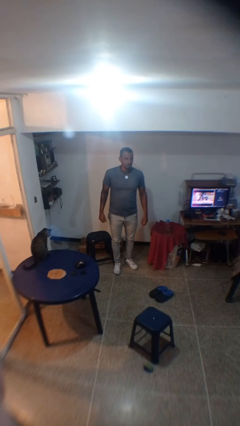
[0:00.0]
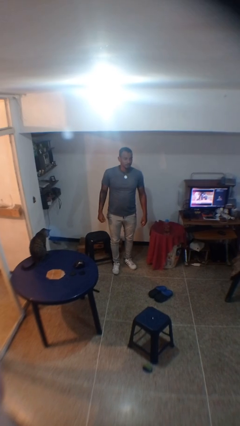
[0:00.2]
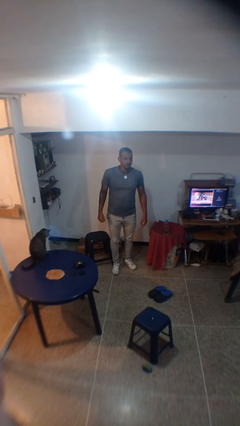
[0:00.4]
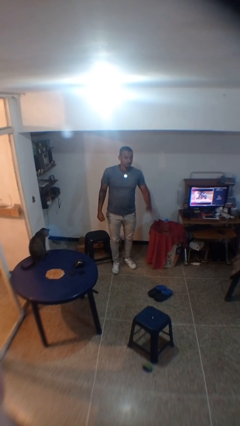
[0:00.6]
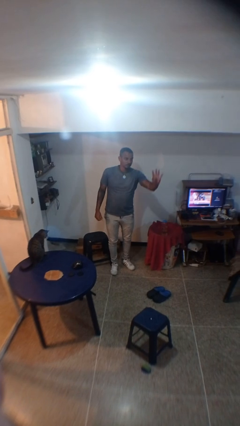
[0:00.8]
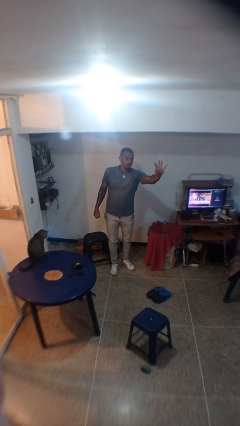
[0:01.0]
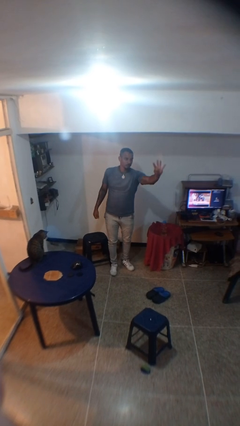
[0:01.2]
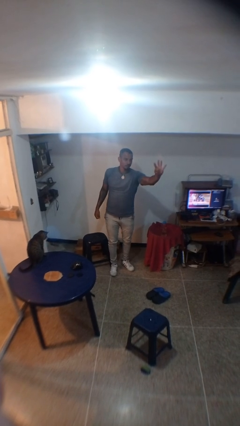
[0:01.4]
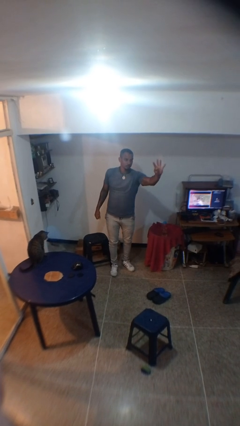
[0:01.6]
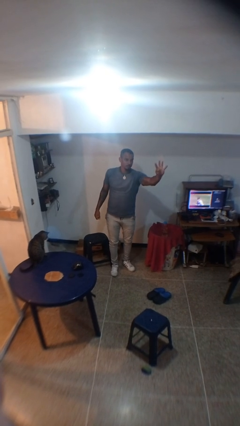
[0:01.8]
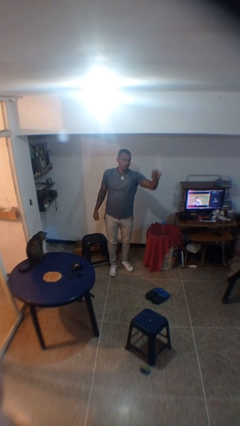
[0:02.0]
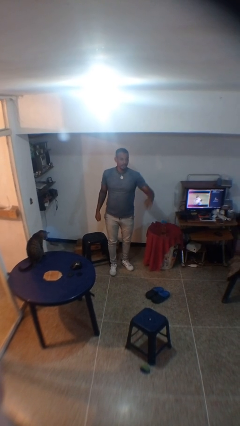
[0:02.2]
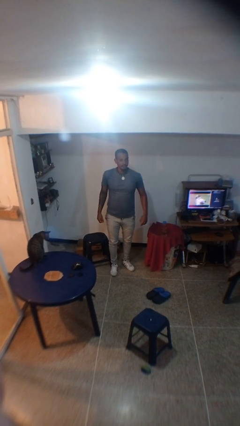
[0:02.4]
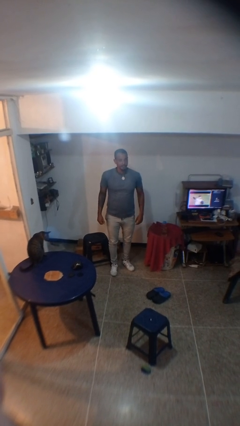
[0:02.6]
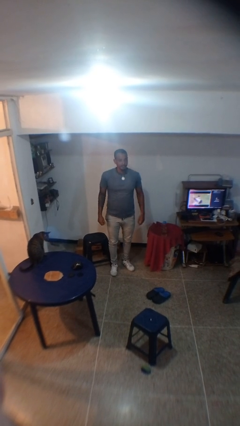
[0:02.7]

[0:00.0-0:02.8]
person gestures number four

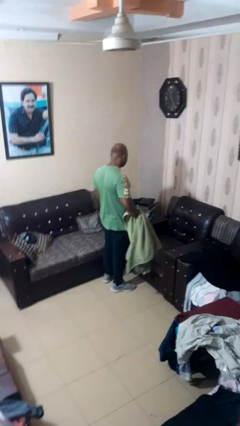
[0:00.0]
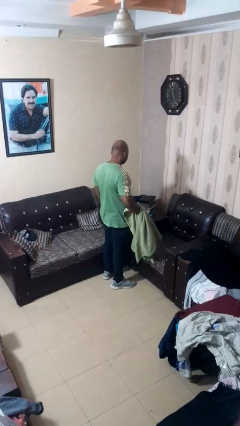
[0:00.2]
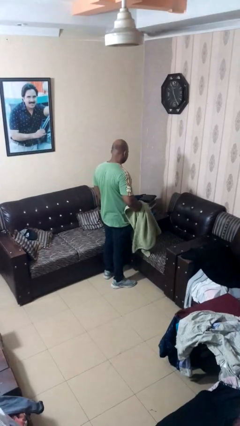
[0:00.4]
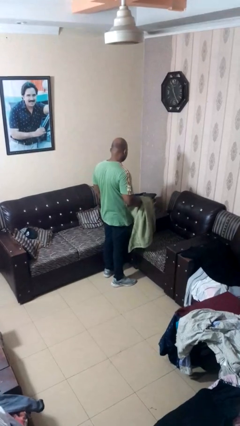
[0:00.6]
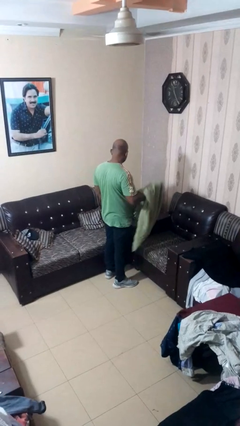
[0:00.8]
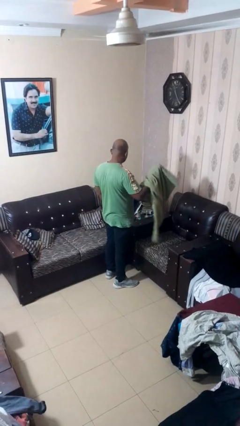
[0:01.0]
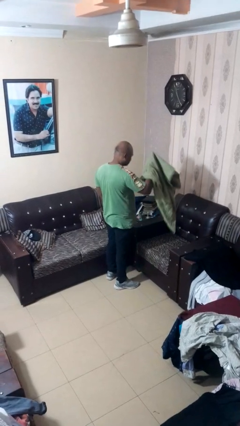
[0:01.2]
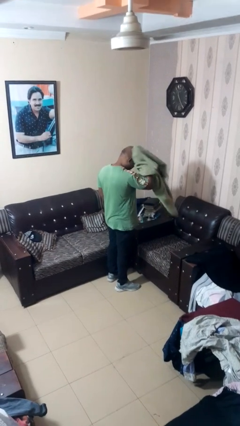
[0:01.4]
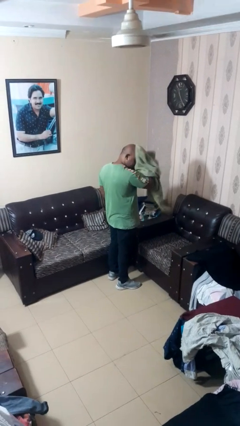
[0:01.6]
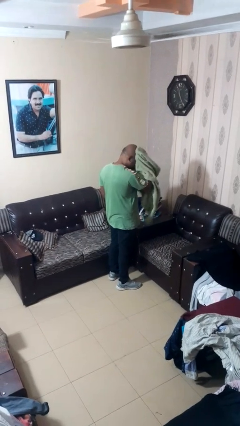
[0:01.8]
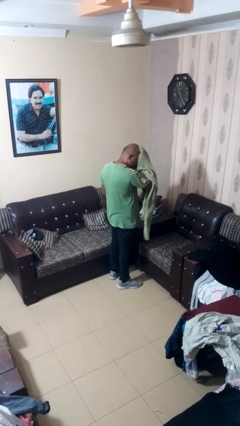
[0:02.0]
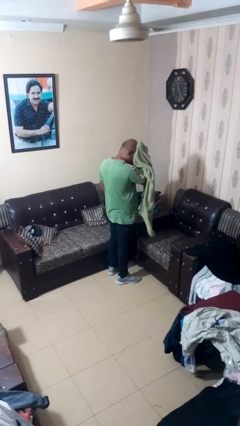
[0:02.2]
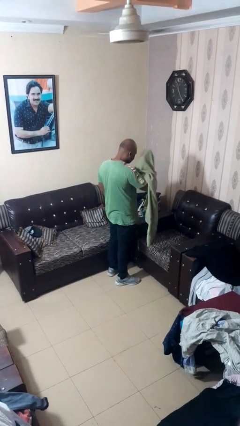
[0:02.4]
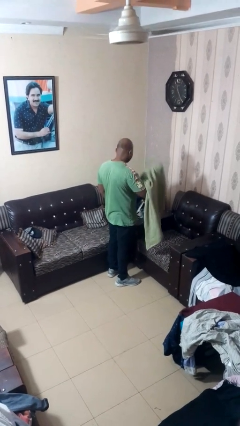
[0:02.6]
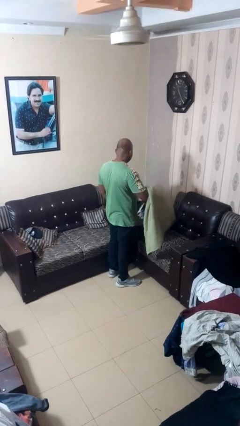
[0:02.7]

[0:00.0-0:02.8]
person dries hair with towel

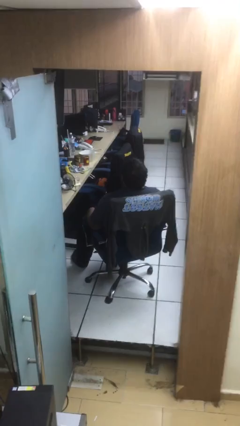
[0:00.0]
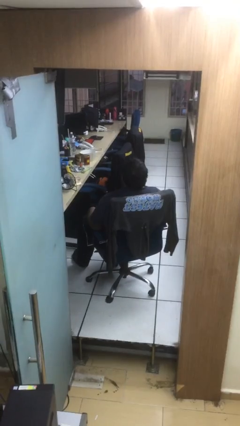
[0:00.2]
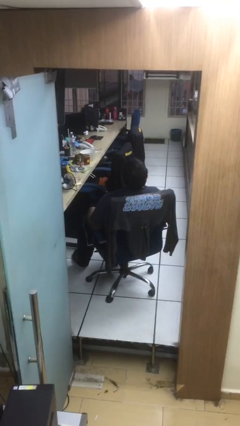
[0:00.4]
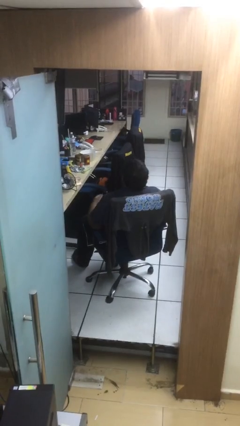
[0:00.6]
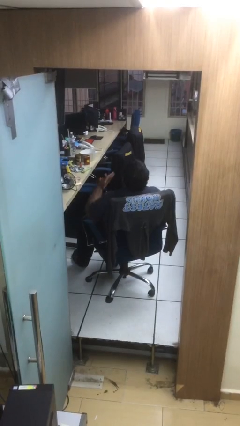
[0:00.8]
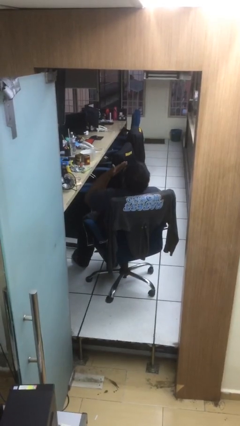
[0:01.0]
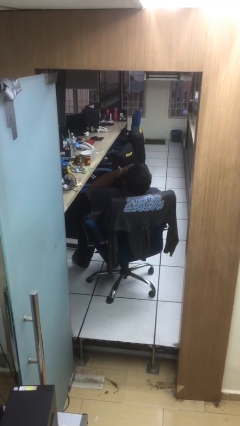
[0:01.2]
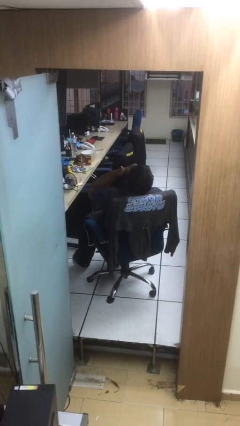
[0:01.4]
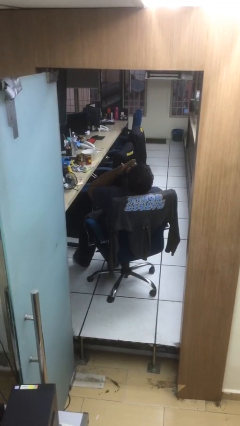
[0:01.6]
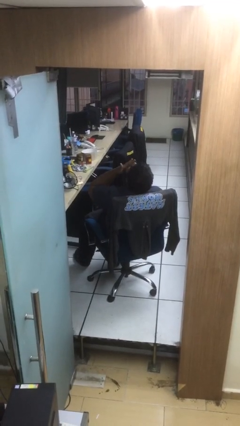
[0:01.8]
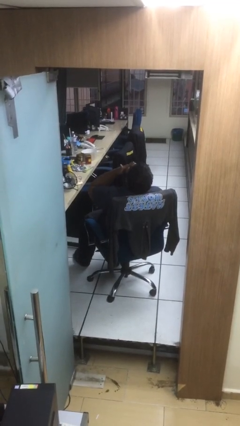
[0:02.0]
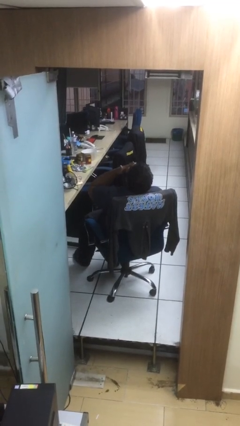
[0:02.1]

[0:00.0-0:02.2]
person yawns

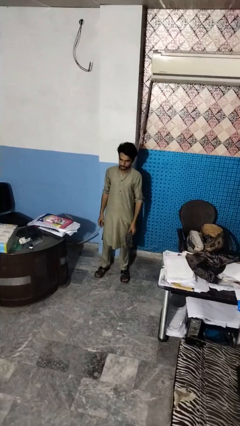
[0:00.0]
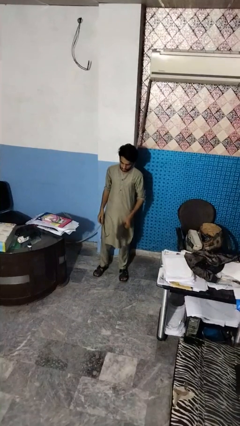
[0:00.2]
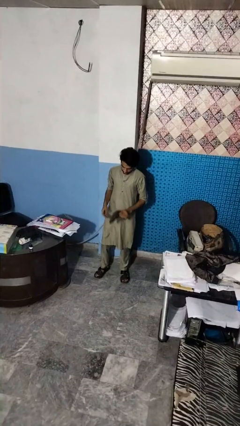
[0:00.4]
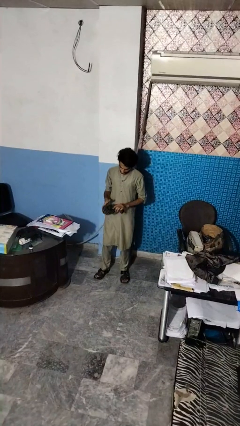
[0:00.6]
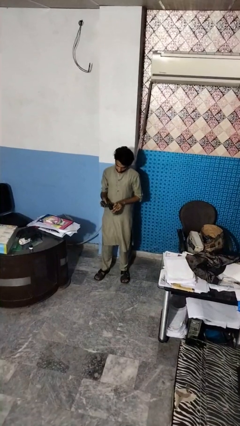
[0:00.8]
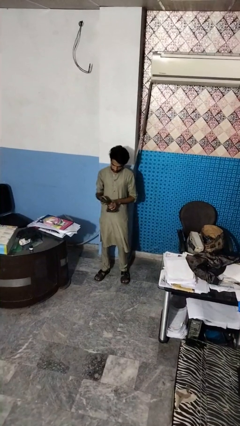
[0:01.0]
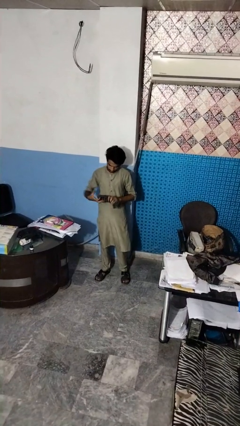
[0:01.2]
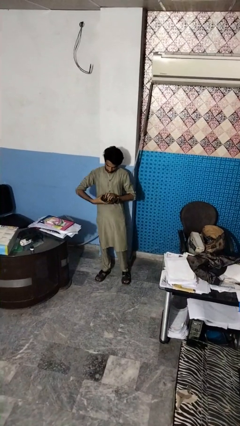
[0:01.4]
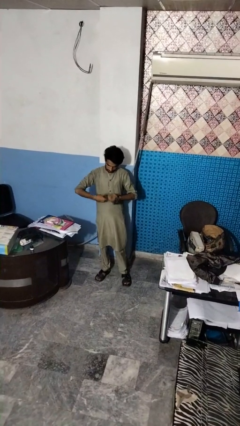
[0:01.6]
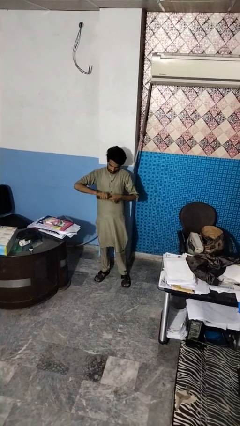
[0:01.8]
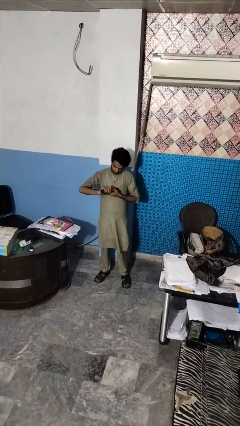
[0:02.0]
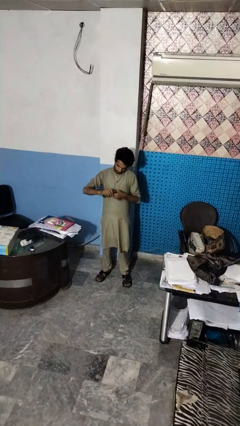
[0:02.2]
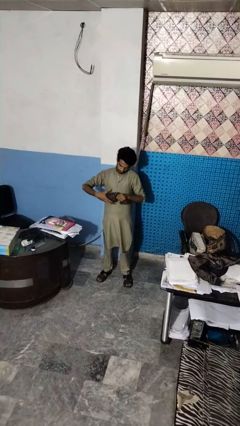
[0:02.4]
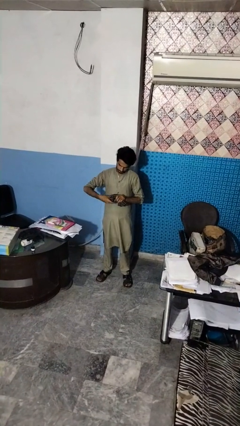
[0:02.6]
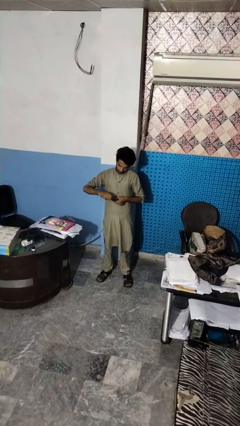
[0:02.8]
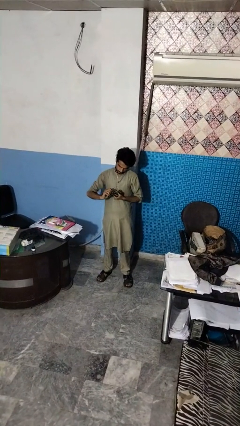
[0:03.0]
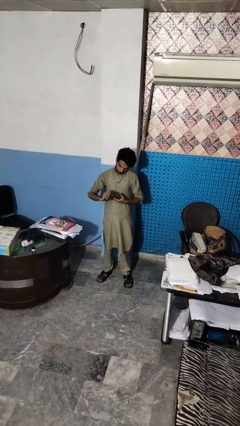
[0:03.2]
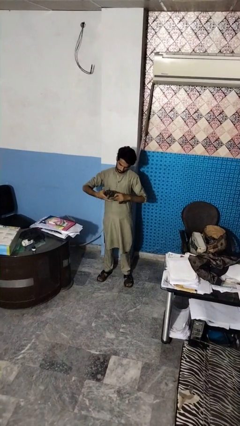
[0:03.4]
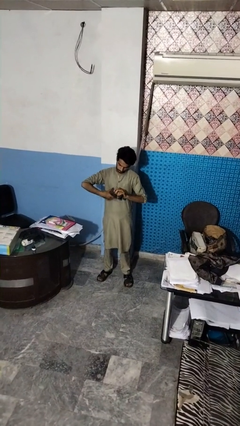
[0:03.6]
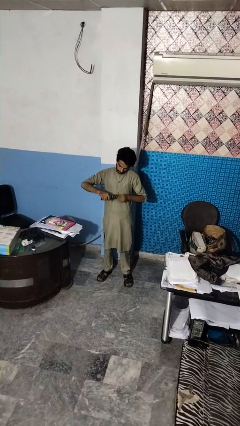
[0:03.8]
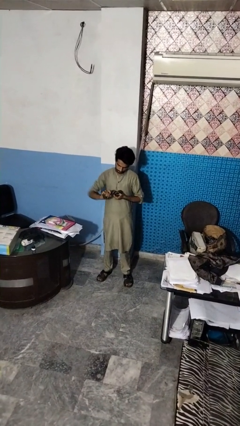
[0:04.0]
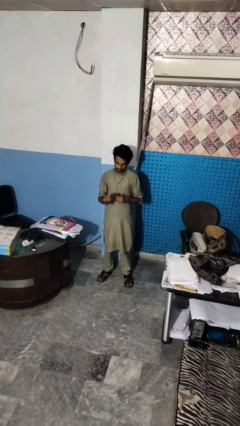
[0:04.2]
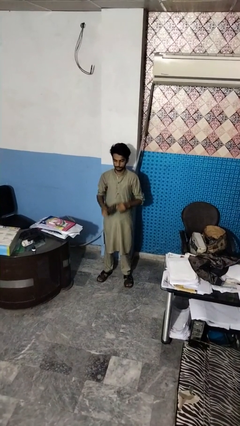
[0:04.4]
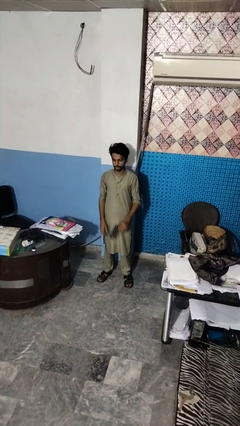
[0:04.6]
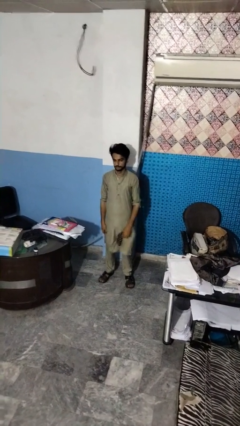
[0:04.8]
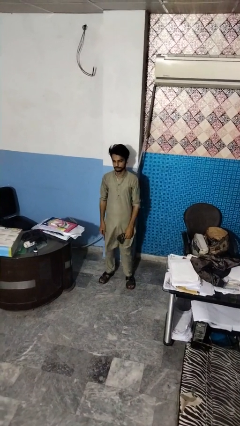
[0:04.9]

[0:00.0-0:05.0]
person squeezes object

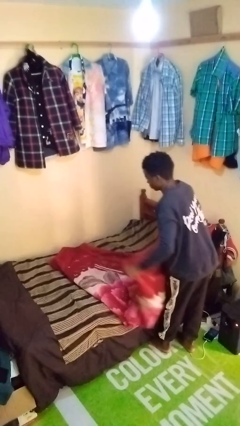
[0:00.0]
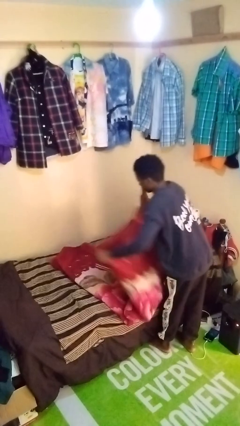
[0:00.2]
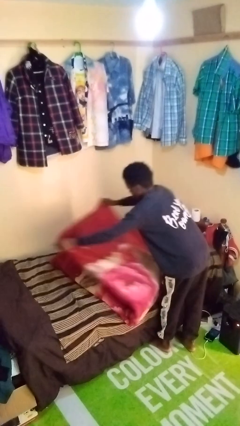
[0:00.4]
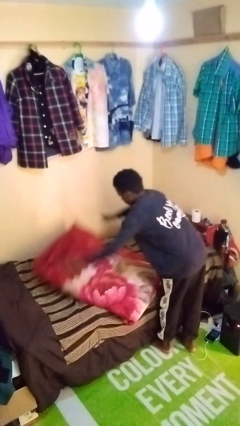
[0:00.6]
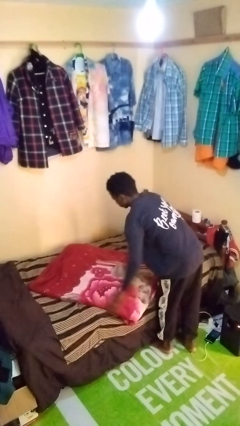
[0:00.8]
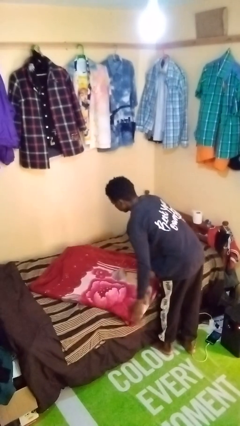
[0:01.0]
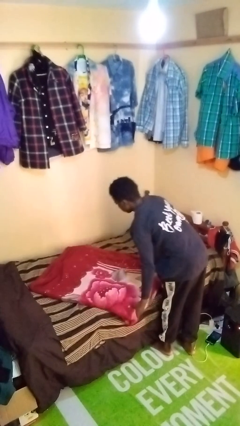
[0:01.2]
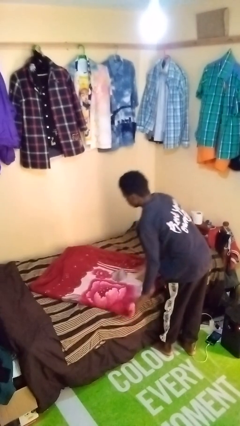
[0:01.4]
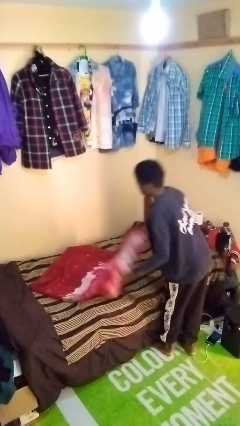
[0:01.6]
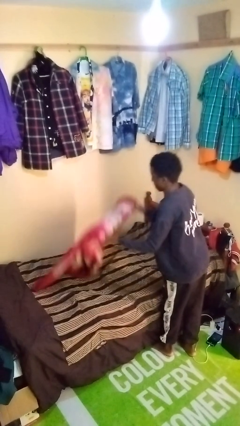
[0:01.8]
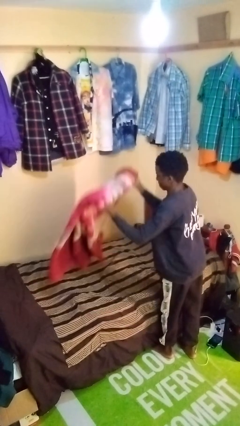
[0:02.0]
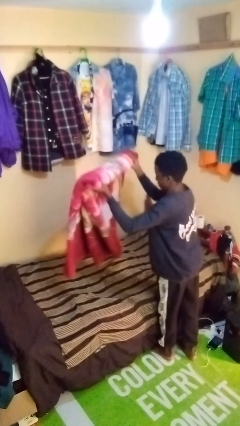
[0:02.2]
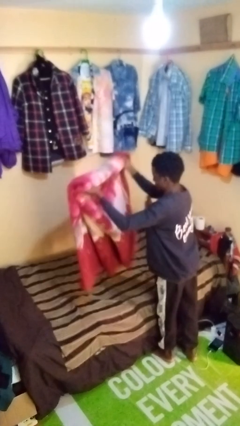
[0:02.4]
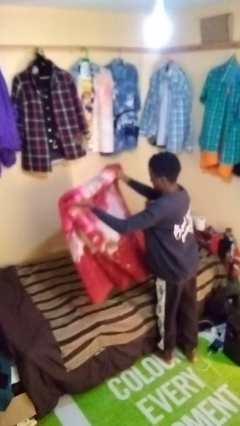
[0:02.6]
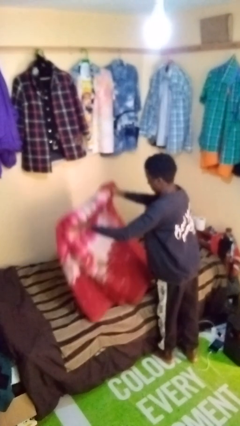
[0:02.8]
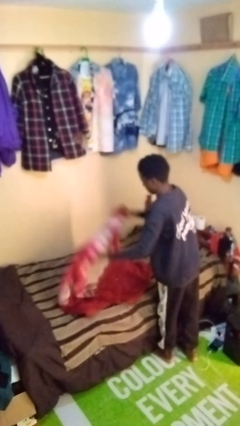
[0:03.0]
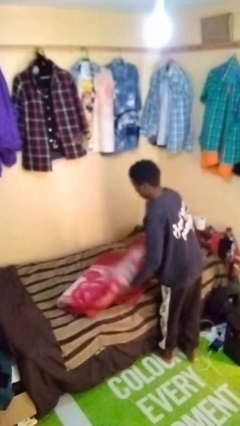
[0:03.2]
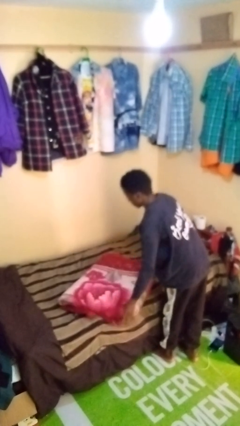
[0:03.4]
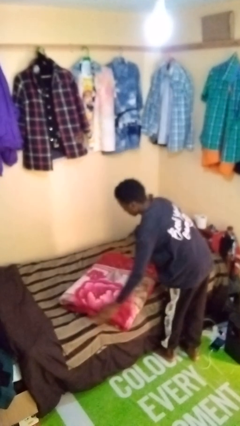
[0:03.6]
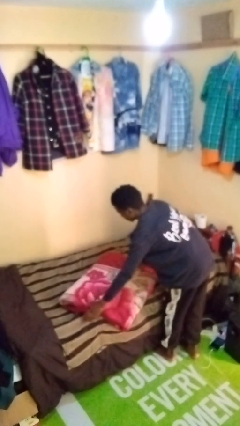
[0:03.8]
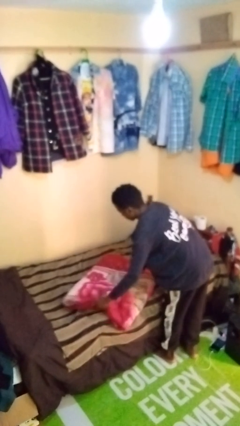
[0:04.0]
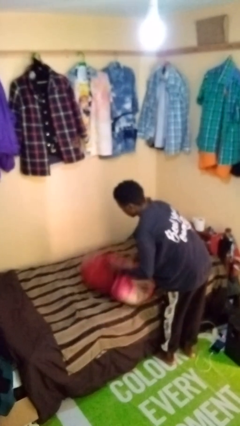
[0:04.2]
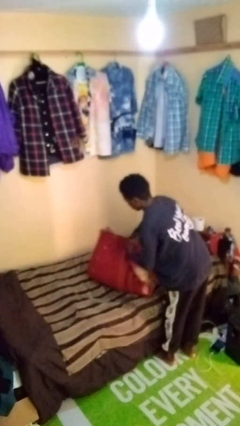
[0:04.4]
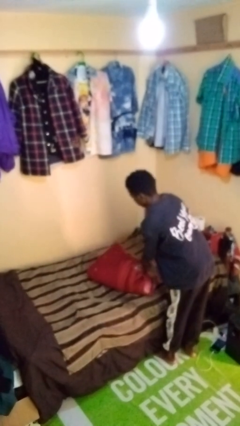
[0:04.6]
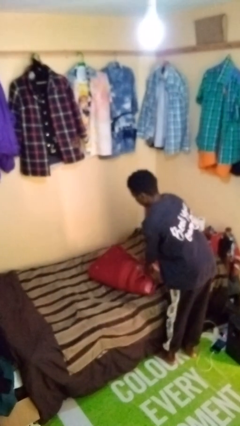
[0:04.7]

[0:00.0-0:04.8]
person folds blanket
